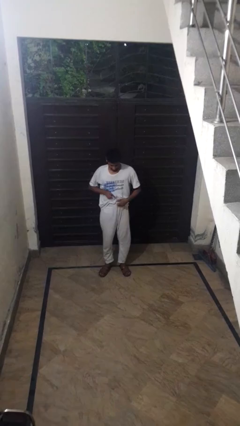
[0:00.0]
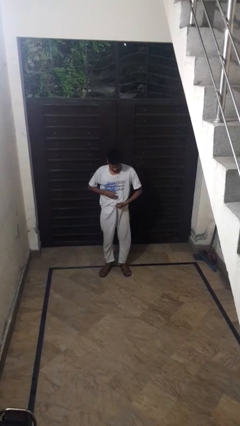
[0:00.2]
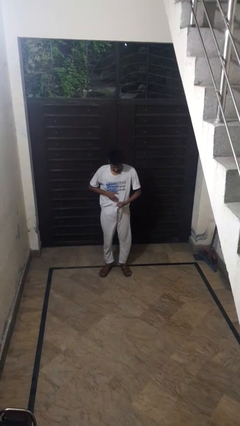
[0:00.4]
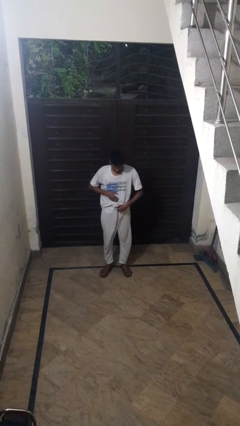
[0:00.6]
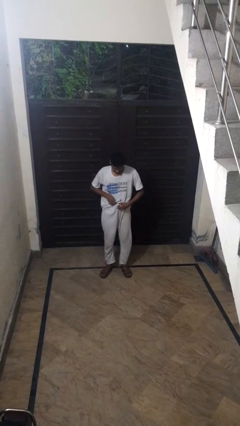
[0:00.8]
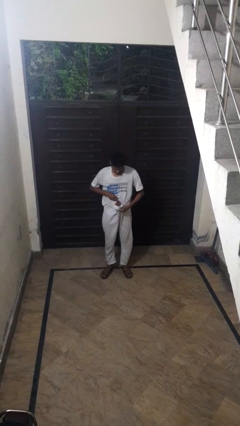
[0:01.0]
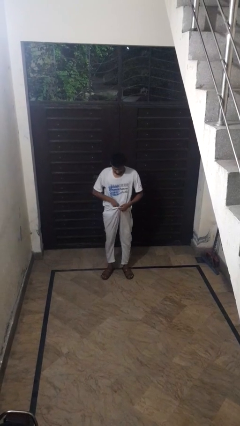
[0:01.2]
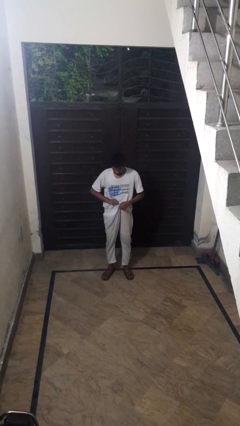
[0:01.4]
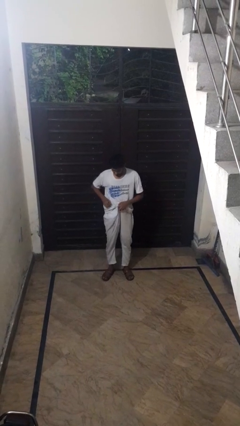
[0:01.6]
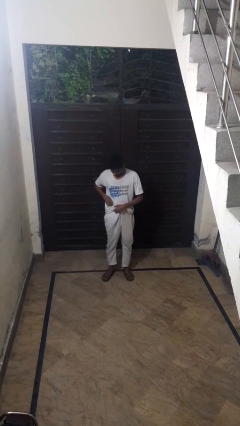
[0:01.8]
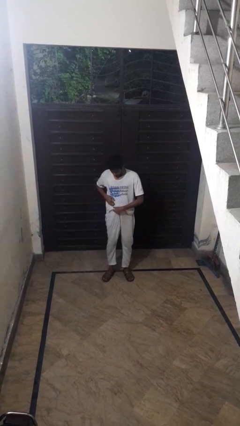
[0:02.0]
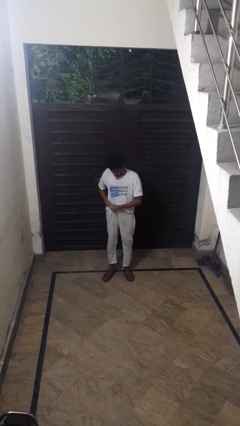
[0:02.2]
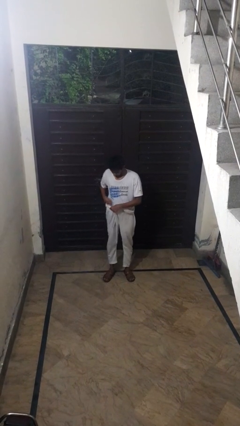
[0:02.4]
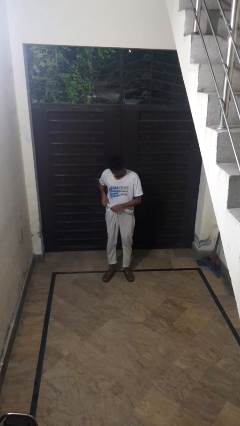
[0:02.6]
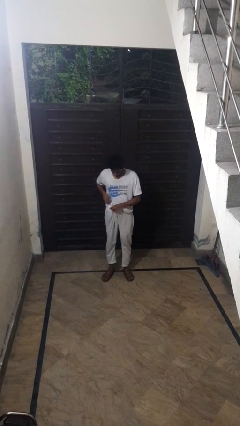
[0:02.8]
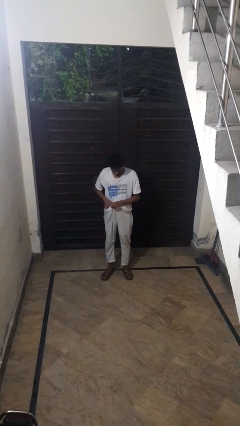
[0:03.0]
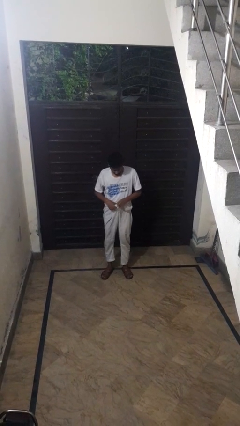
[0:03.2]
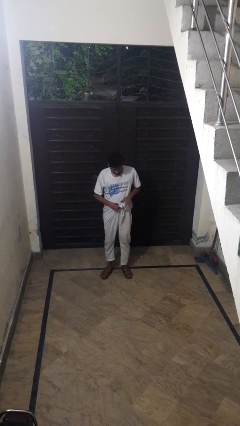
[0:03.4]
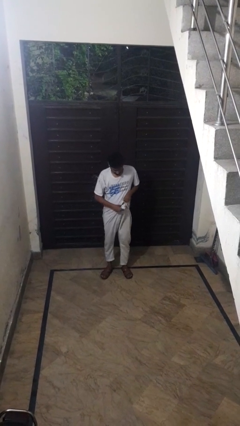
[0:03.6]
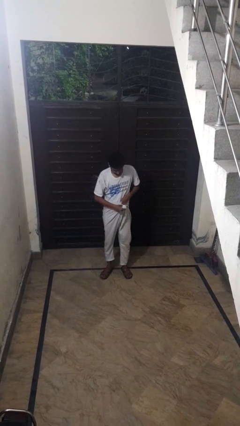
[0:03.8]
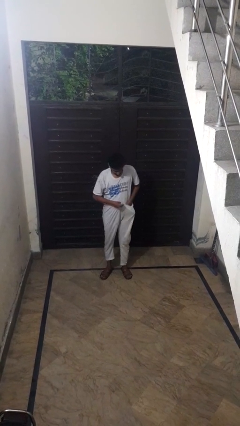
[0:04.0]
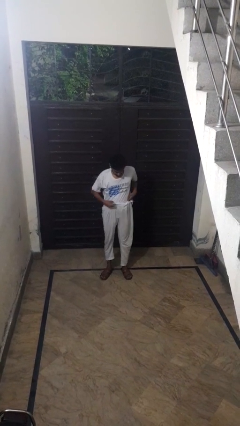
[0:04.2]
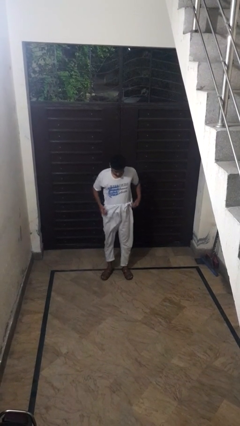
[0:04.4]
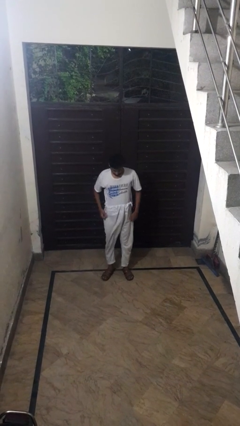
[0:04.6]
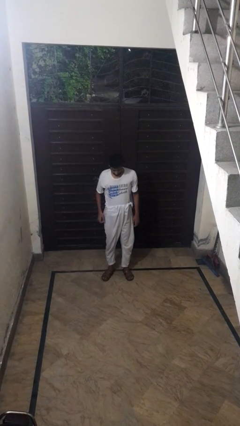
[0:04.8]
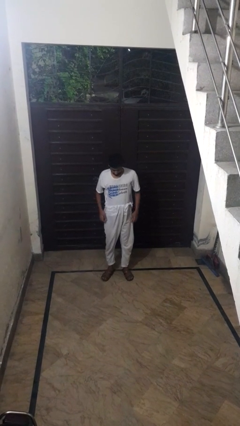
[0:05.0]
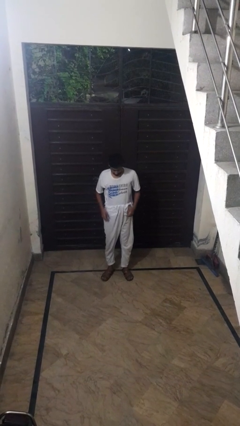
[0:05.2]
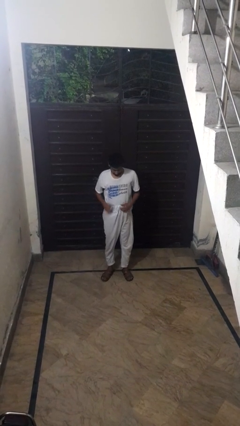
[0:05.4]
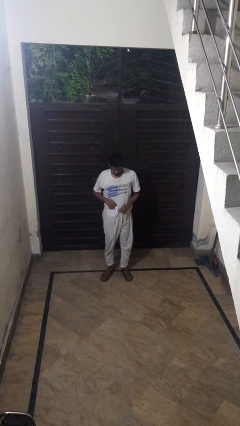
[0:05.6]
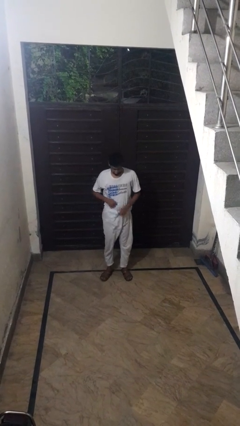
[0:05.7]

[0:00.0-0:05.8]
person tucks in shirt

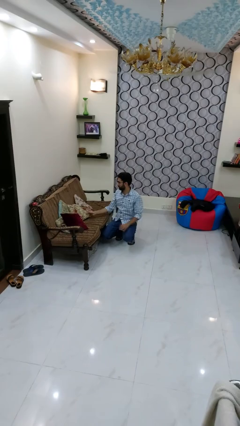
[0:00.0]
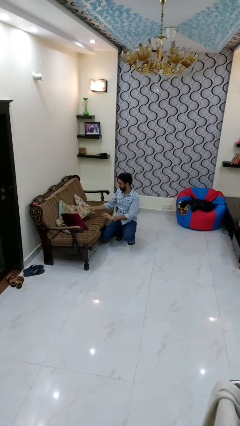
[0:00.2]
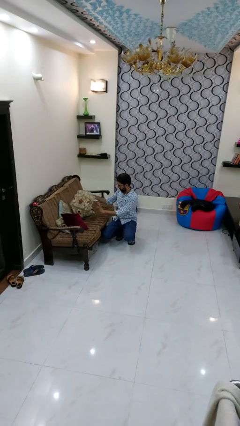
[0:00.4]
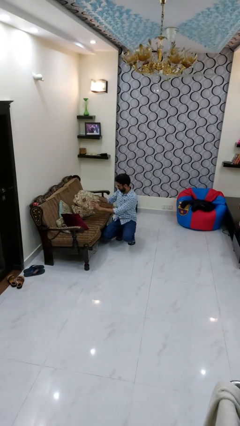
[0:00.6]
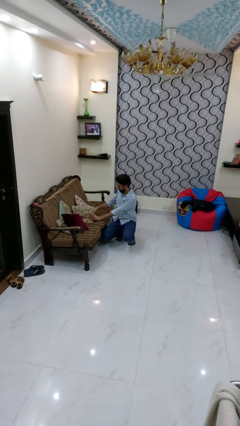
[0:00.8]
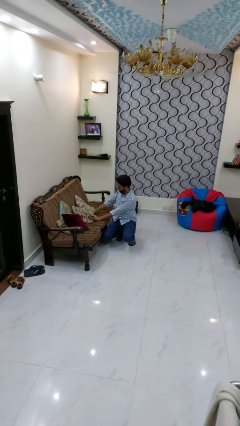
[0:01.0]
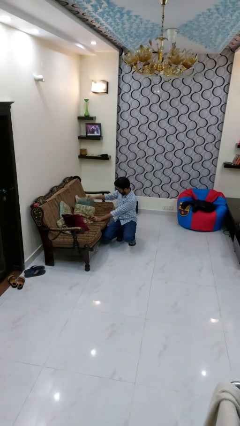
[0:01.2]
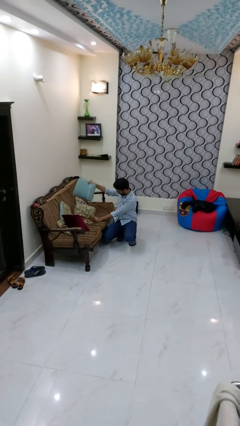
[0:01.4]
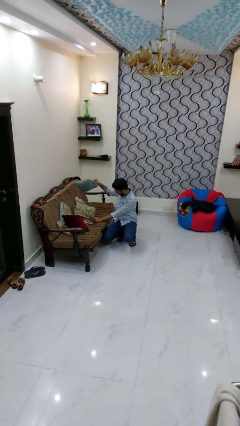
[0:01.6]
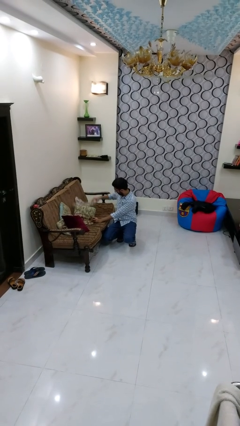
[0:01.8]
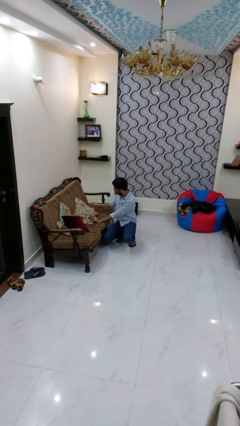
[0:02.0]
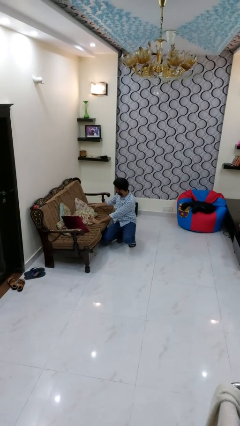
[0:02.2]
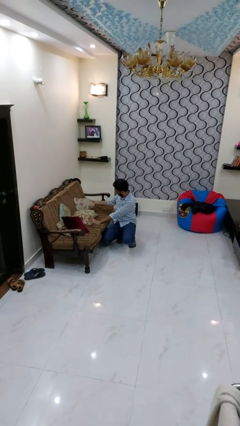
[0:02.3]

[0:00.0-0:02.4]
person searches in couch

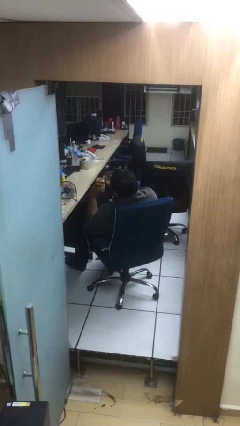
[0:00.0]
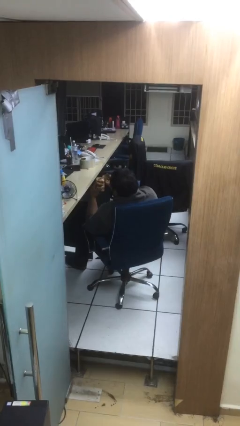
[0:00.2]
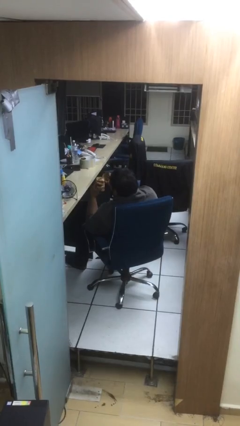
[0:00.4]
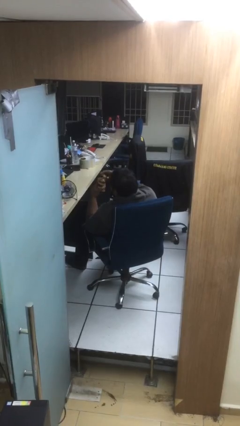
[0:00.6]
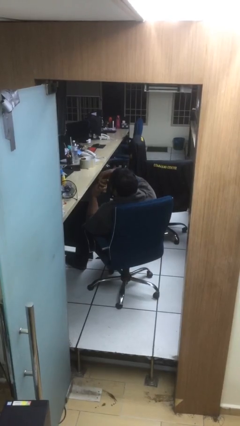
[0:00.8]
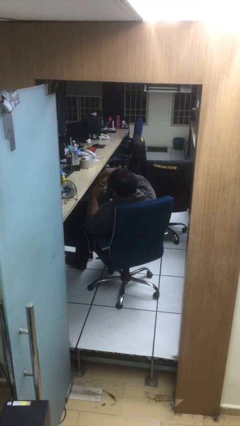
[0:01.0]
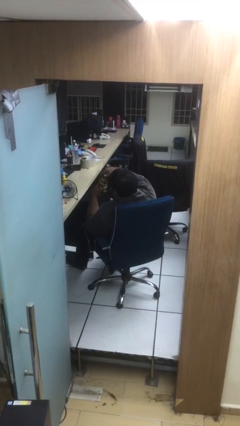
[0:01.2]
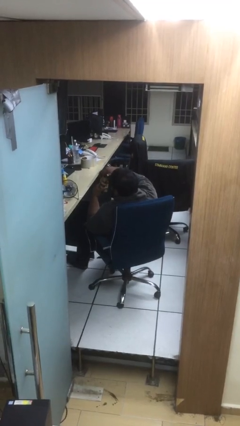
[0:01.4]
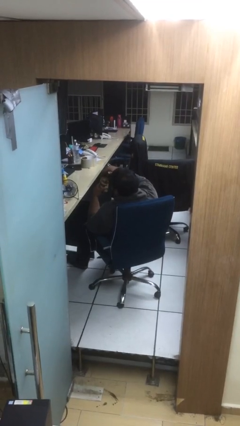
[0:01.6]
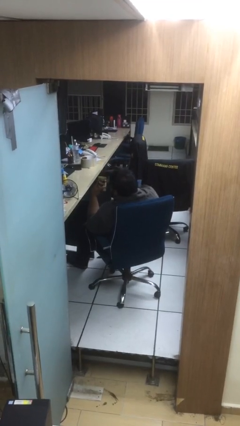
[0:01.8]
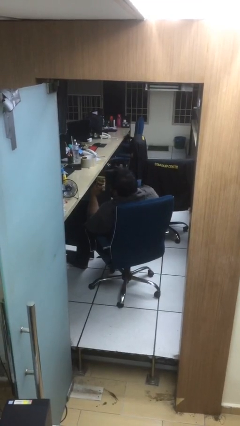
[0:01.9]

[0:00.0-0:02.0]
person closes jar

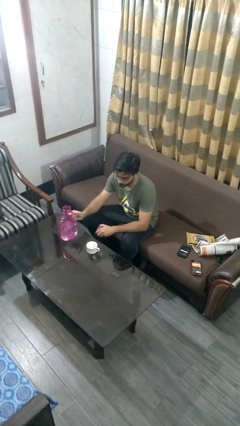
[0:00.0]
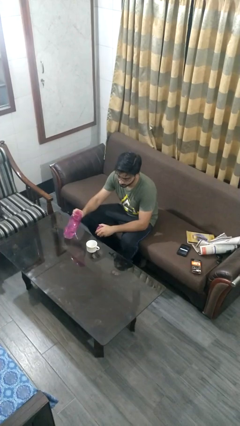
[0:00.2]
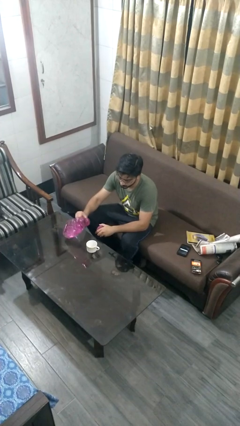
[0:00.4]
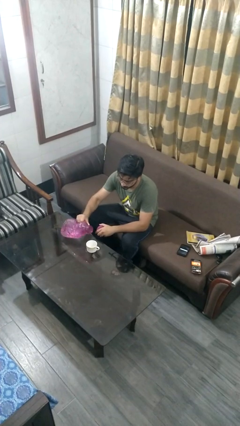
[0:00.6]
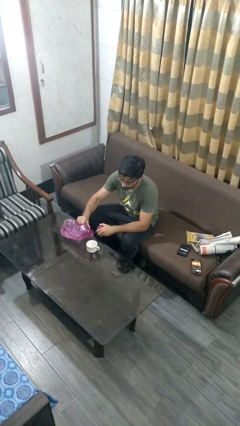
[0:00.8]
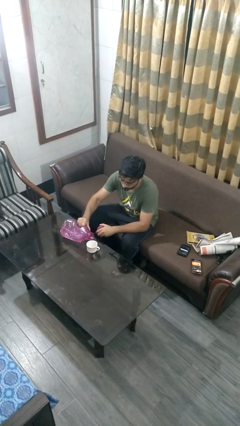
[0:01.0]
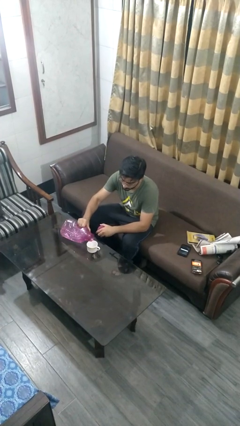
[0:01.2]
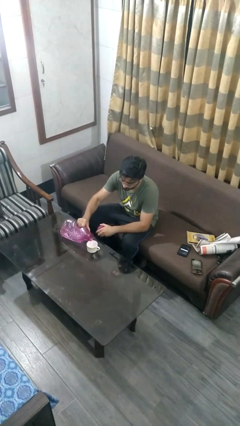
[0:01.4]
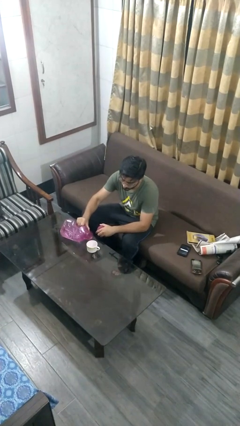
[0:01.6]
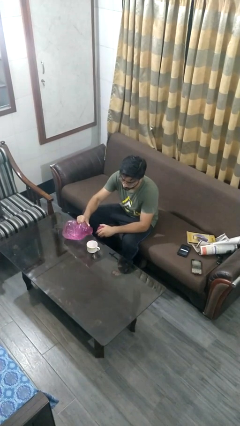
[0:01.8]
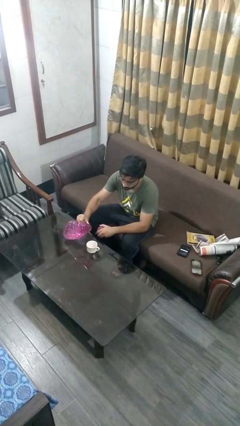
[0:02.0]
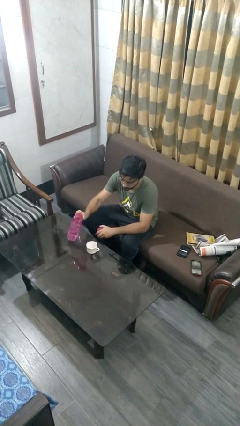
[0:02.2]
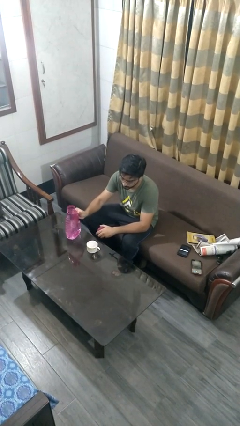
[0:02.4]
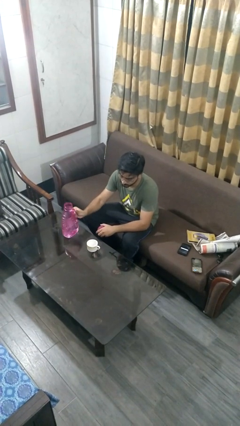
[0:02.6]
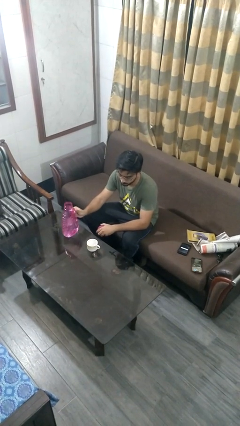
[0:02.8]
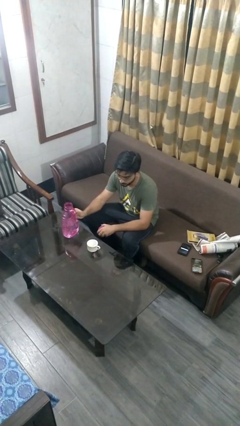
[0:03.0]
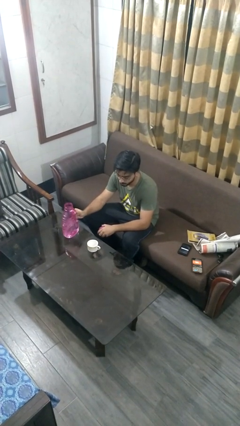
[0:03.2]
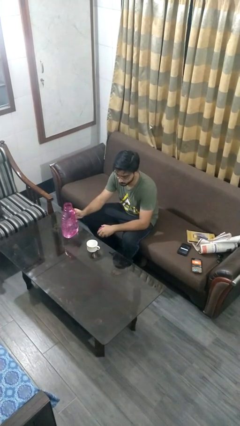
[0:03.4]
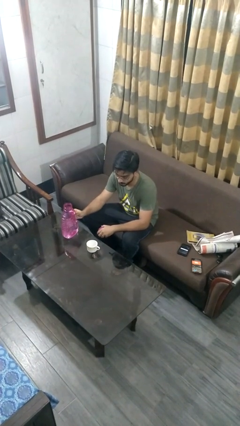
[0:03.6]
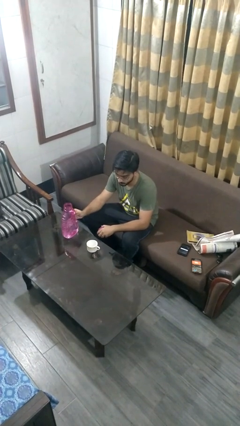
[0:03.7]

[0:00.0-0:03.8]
person pours liquid into cup

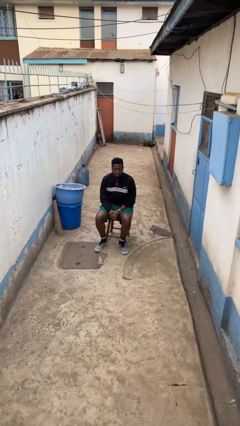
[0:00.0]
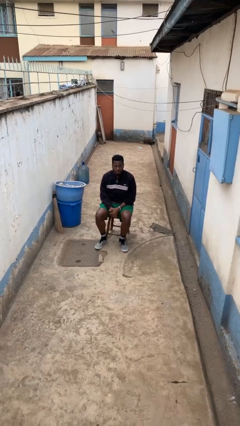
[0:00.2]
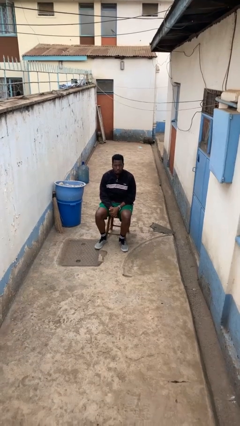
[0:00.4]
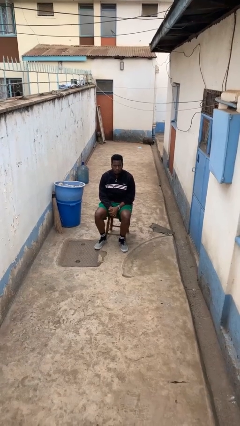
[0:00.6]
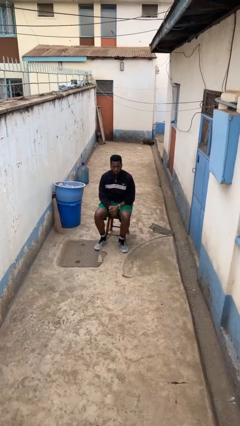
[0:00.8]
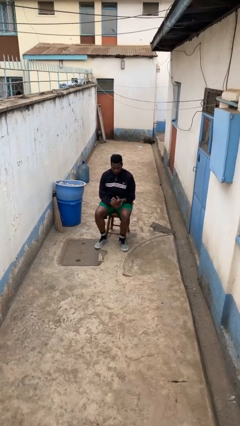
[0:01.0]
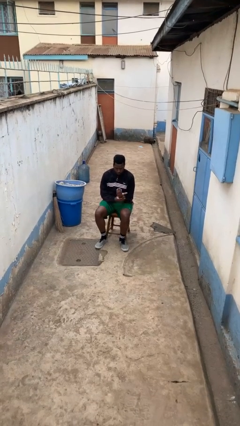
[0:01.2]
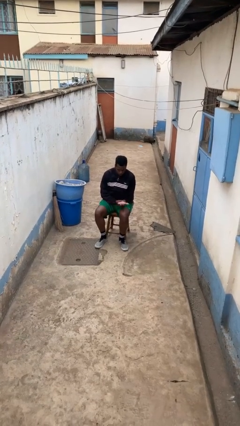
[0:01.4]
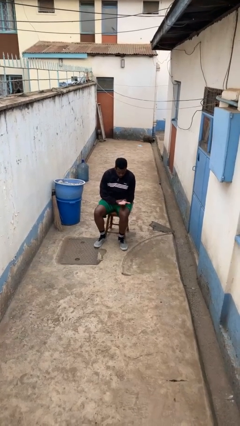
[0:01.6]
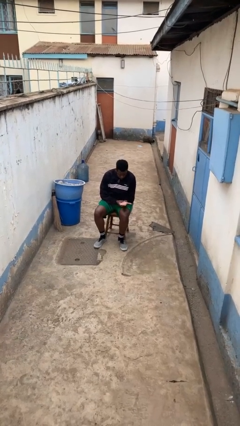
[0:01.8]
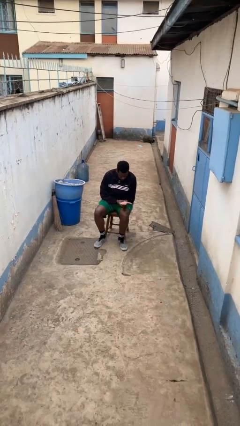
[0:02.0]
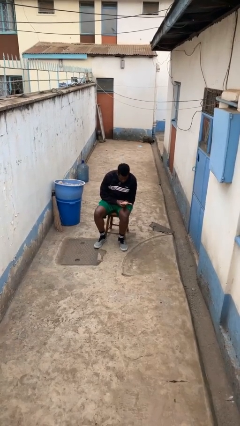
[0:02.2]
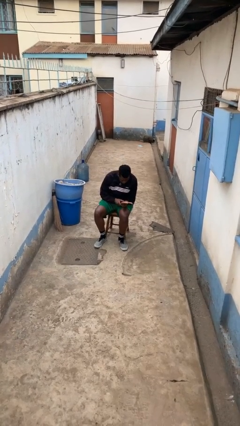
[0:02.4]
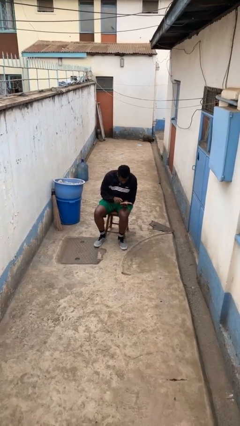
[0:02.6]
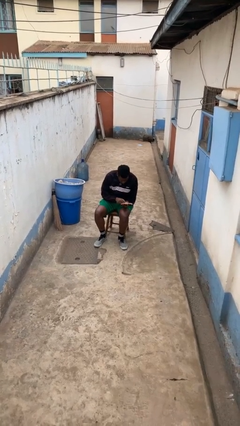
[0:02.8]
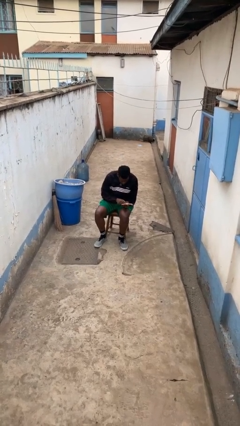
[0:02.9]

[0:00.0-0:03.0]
person looks at hands in lap

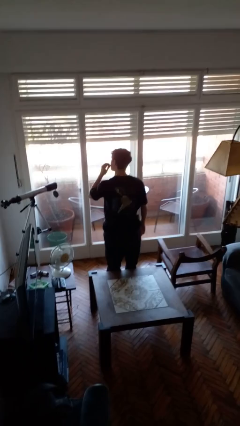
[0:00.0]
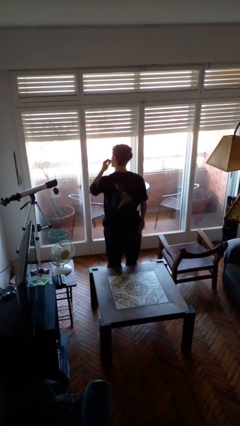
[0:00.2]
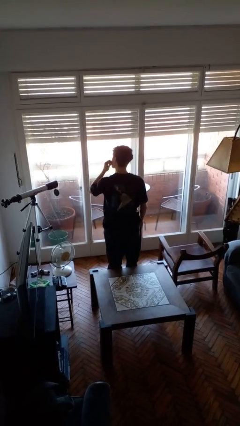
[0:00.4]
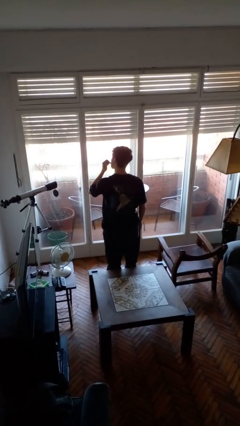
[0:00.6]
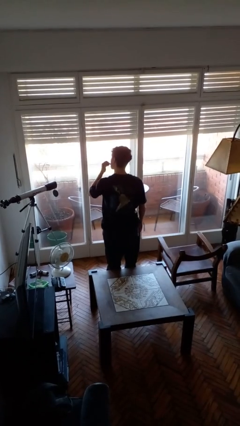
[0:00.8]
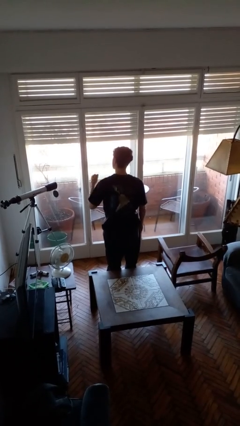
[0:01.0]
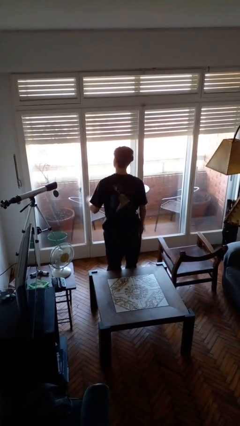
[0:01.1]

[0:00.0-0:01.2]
person licks fingers
